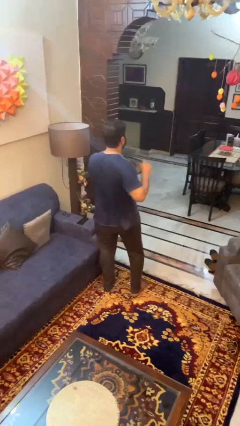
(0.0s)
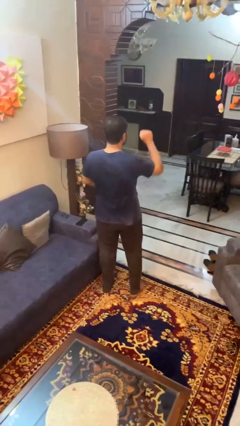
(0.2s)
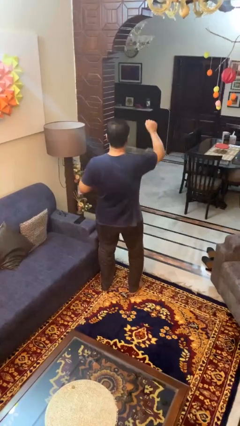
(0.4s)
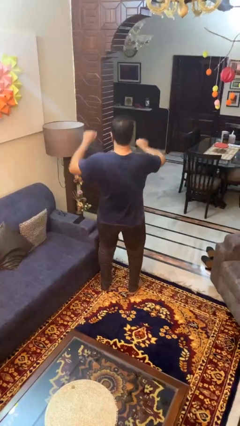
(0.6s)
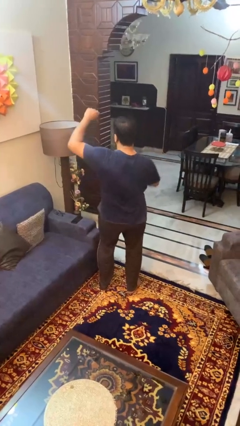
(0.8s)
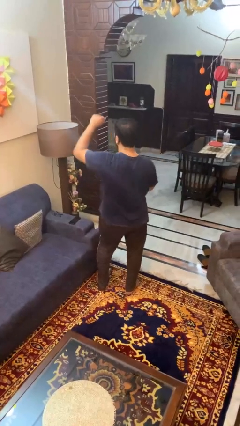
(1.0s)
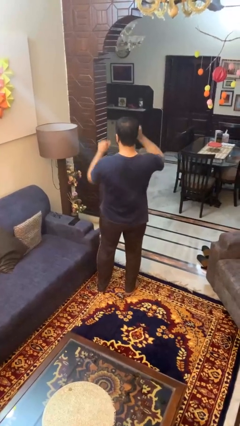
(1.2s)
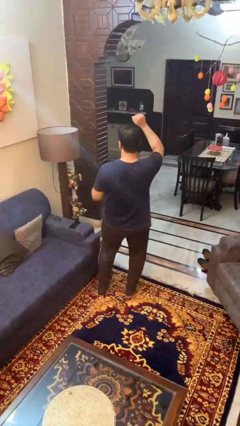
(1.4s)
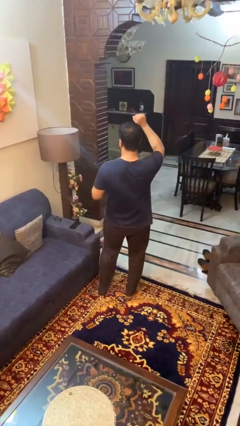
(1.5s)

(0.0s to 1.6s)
person dances in place

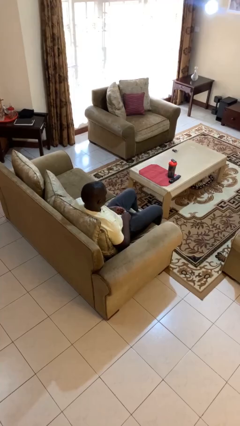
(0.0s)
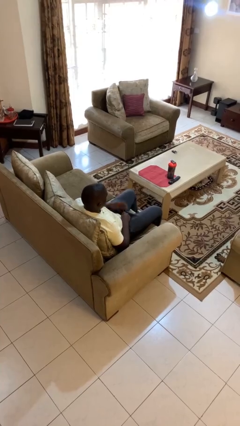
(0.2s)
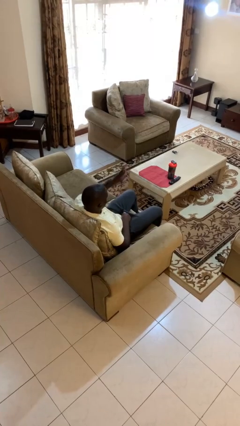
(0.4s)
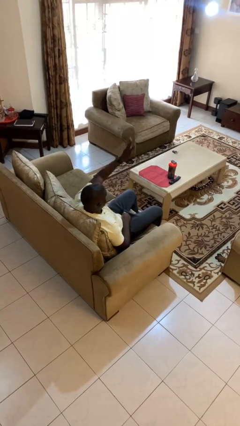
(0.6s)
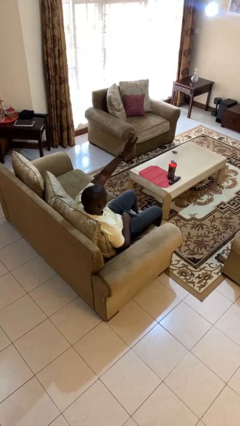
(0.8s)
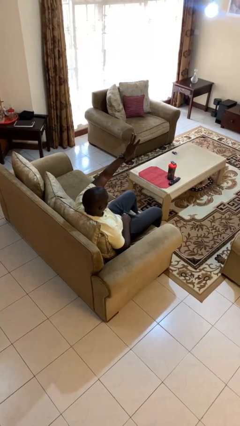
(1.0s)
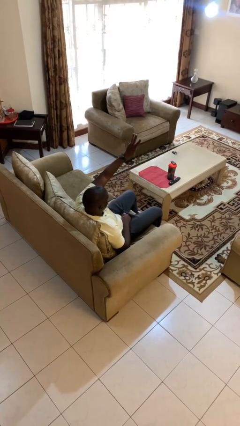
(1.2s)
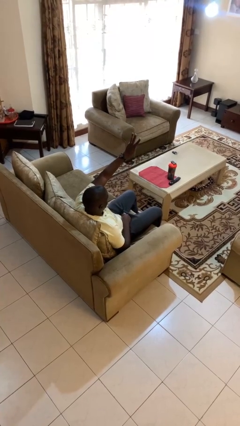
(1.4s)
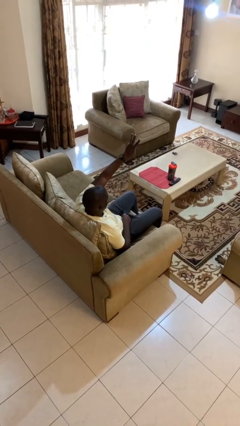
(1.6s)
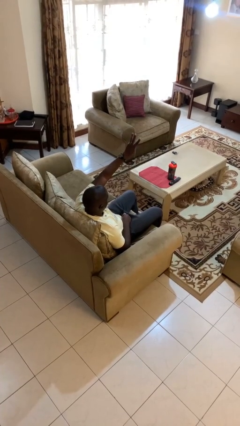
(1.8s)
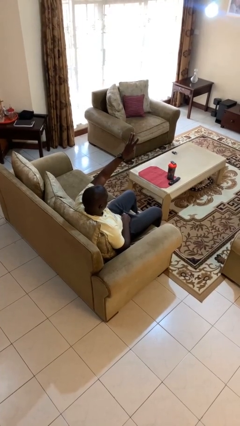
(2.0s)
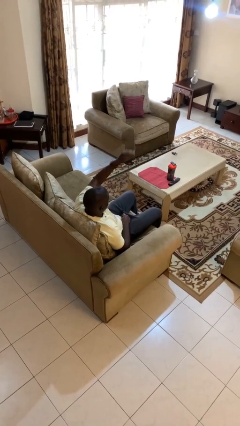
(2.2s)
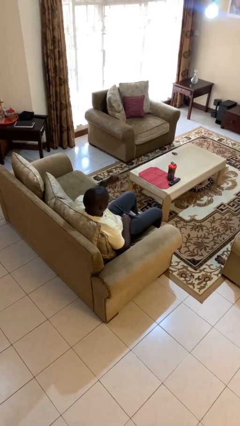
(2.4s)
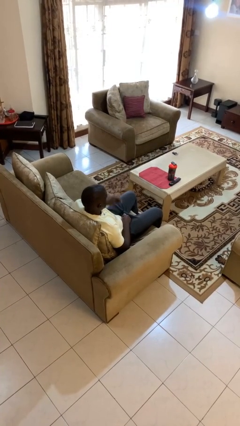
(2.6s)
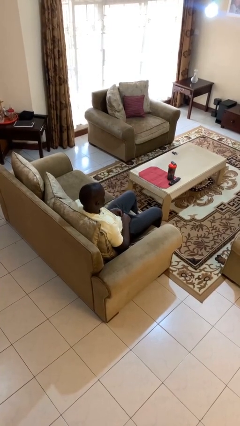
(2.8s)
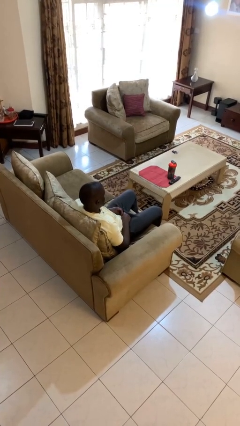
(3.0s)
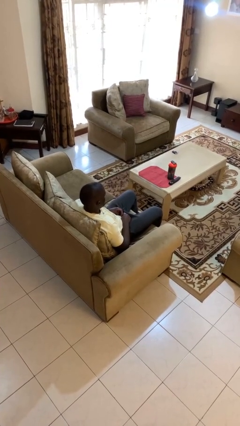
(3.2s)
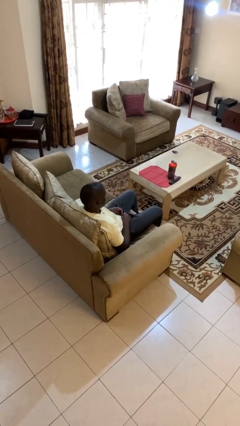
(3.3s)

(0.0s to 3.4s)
person gestures number three

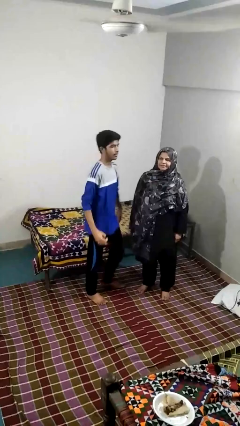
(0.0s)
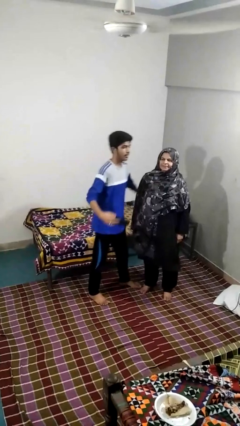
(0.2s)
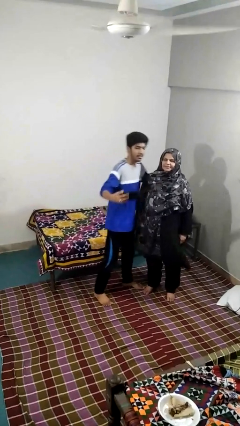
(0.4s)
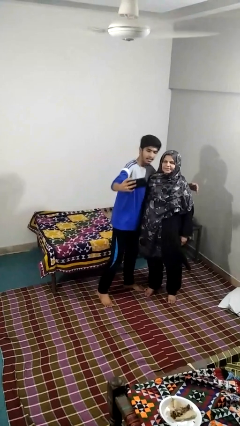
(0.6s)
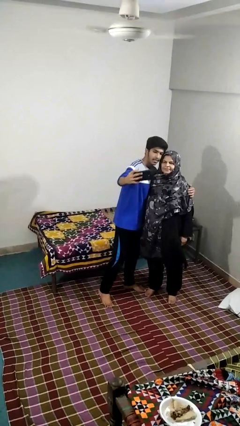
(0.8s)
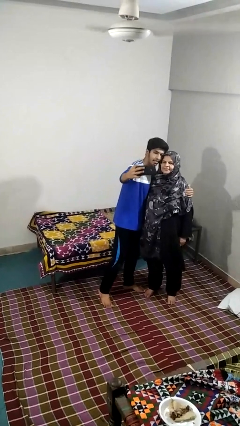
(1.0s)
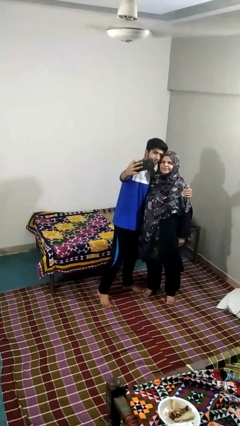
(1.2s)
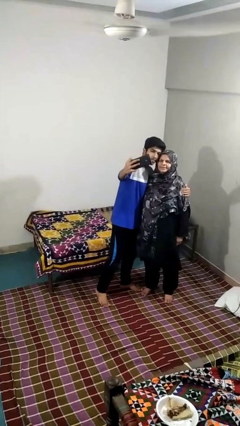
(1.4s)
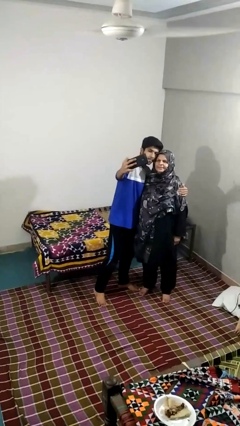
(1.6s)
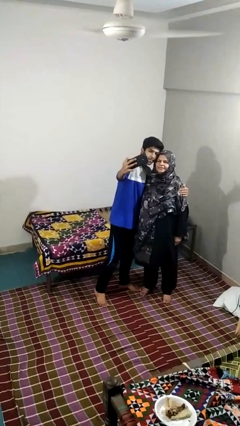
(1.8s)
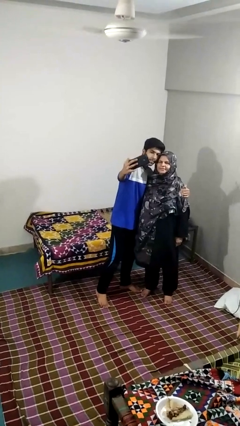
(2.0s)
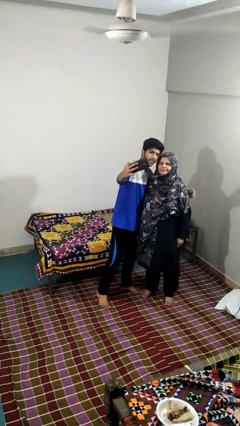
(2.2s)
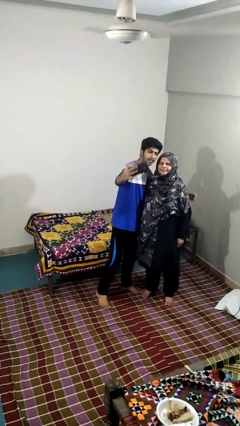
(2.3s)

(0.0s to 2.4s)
person takes selfie with person

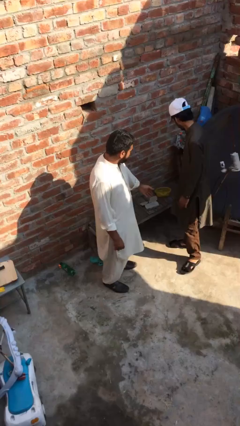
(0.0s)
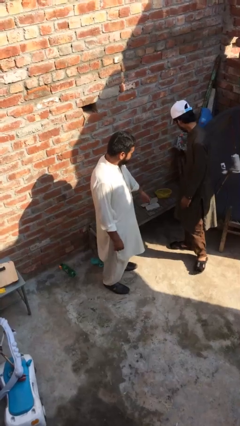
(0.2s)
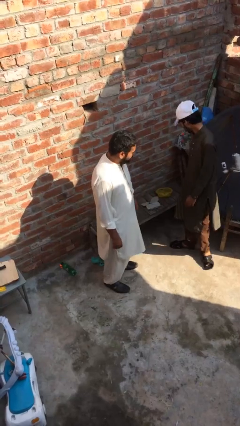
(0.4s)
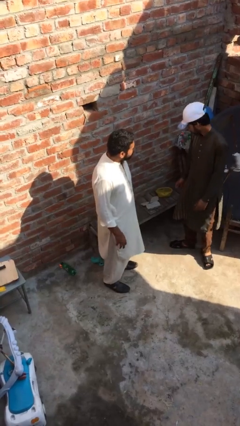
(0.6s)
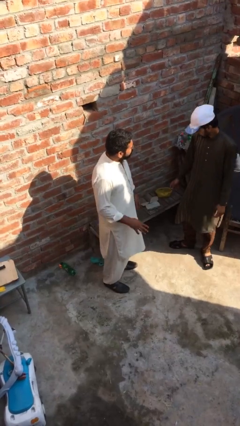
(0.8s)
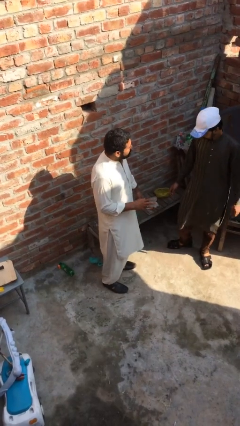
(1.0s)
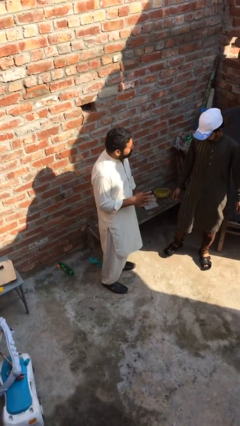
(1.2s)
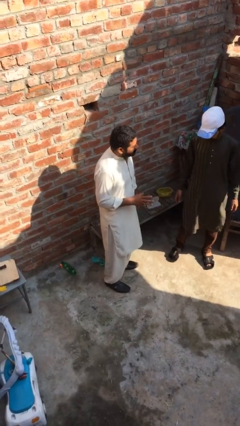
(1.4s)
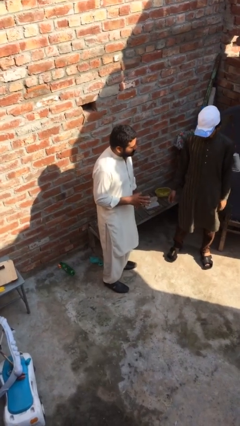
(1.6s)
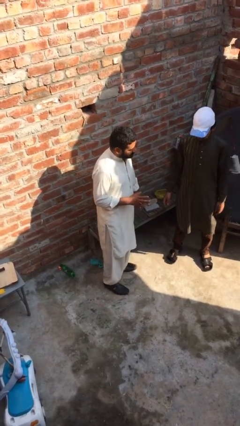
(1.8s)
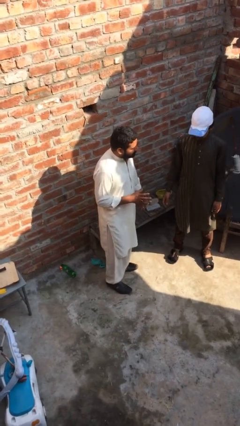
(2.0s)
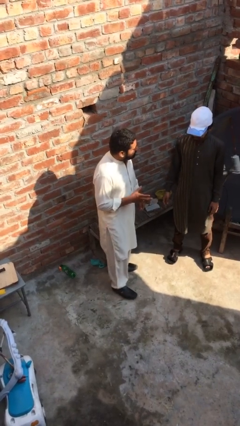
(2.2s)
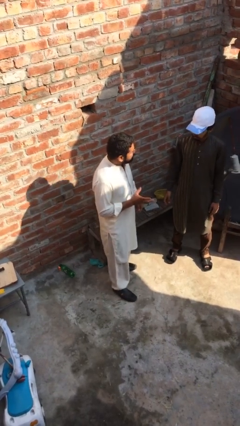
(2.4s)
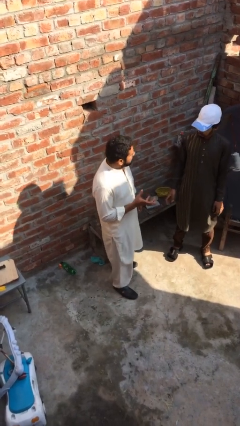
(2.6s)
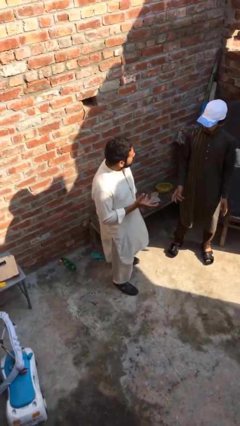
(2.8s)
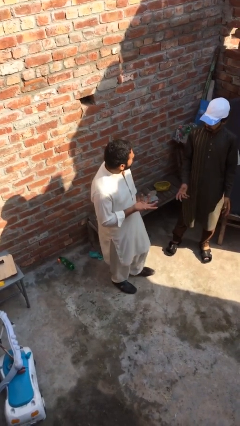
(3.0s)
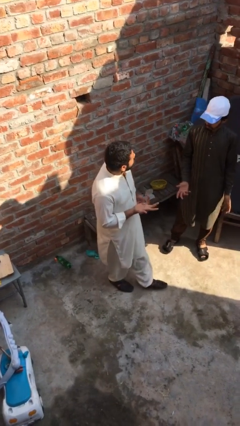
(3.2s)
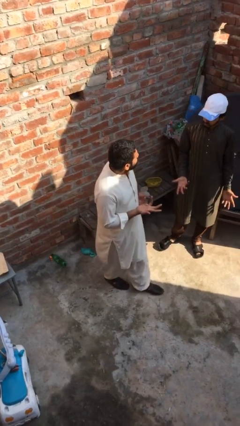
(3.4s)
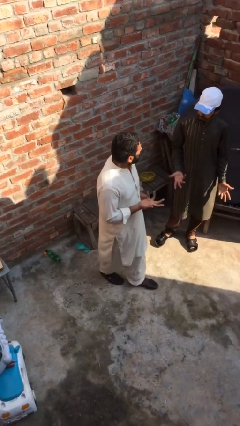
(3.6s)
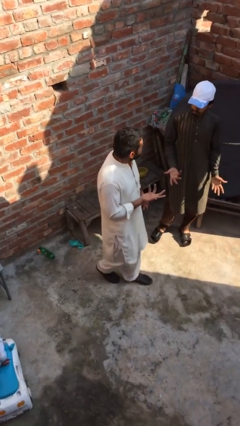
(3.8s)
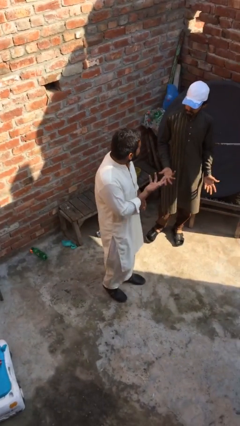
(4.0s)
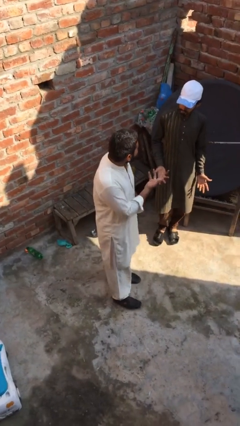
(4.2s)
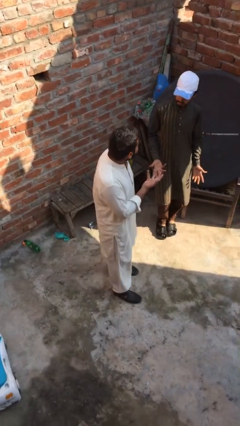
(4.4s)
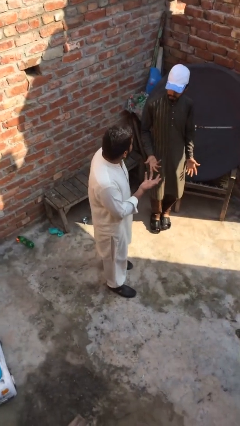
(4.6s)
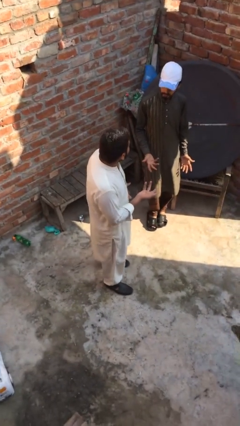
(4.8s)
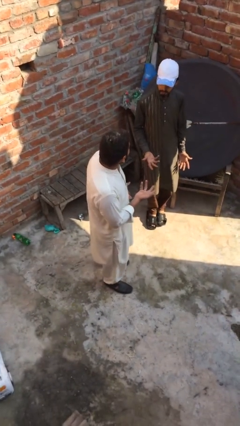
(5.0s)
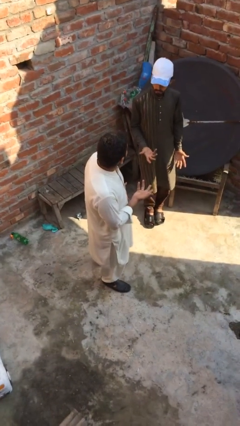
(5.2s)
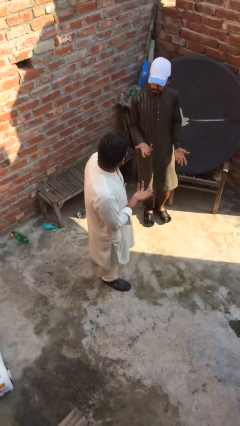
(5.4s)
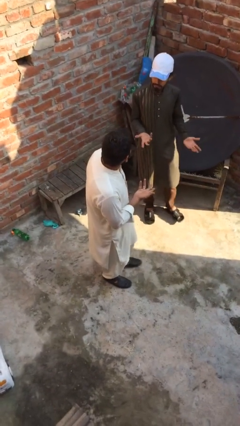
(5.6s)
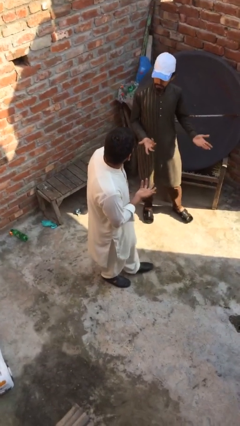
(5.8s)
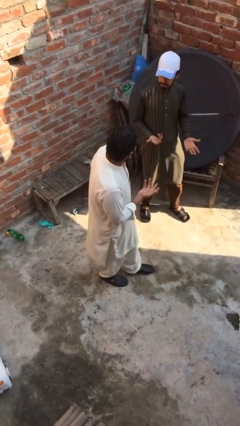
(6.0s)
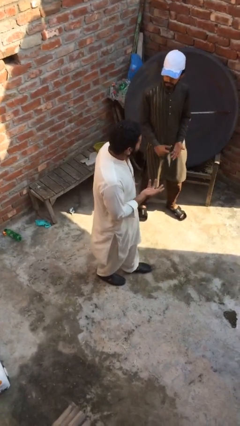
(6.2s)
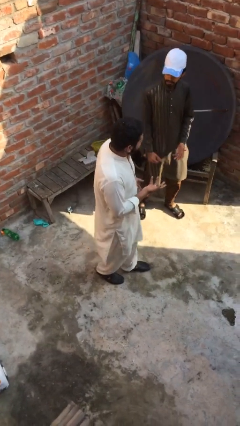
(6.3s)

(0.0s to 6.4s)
person talks to person

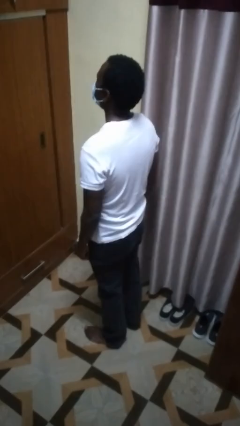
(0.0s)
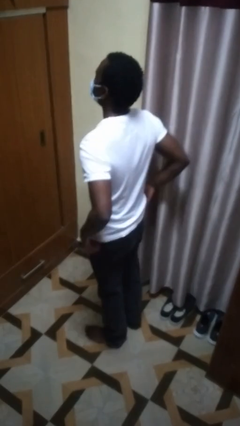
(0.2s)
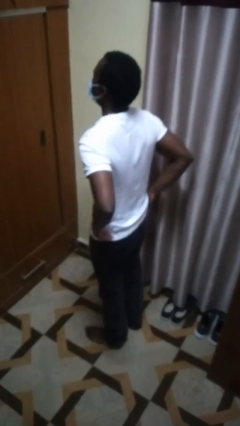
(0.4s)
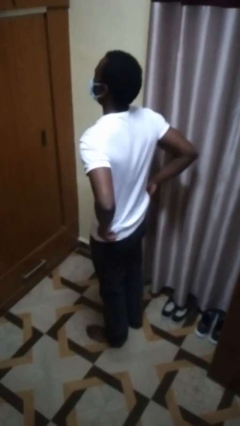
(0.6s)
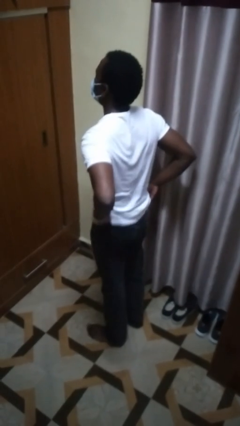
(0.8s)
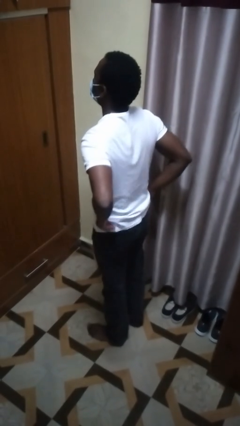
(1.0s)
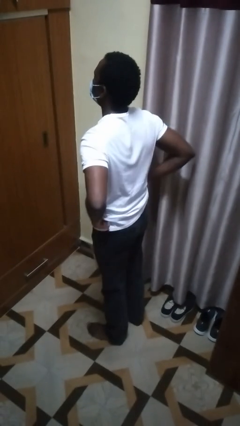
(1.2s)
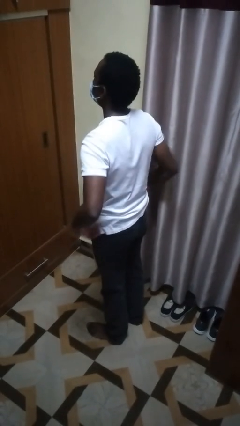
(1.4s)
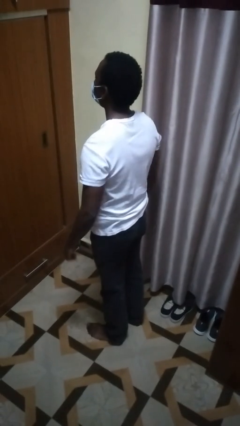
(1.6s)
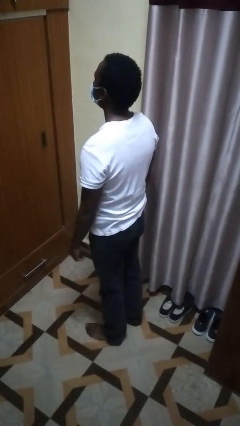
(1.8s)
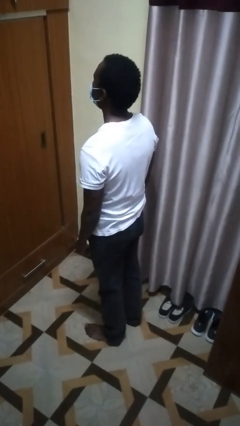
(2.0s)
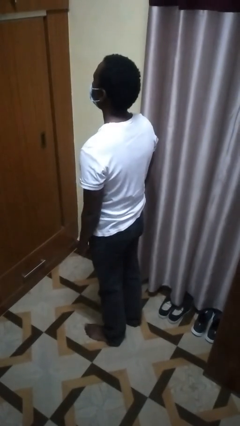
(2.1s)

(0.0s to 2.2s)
person hikes up pants

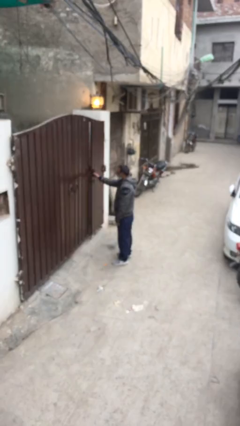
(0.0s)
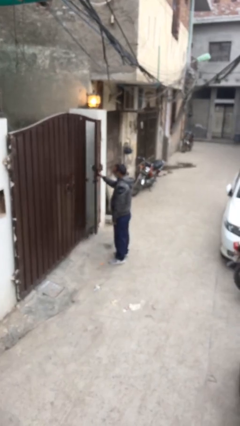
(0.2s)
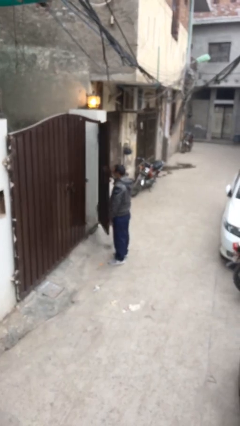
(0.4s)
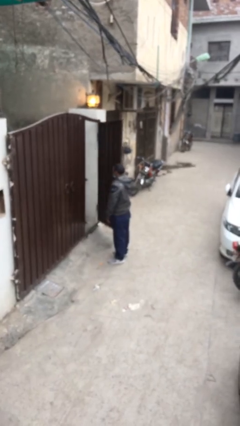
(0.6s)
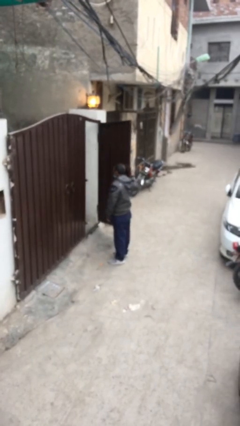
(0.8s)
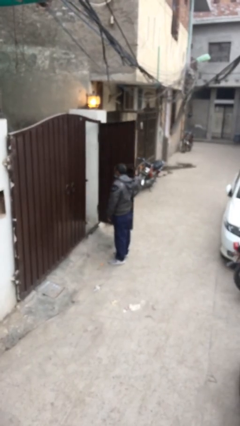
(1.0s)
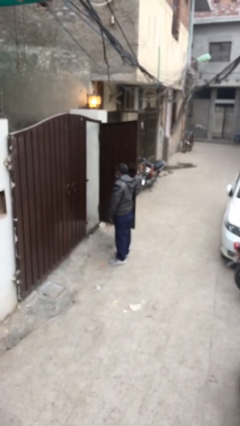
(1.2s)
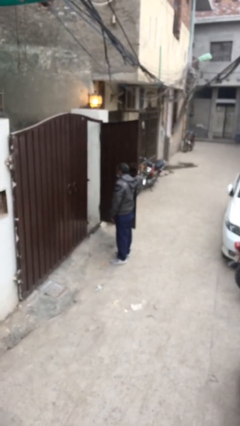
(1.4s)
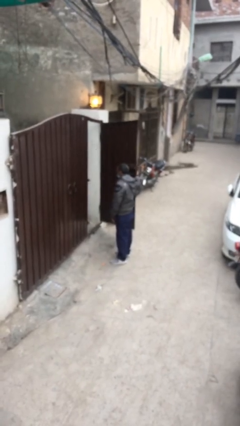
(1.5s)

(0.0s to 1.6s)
person opens facility door
